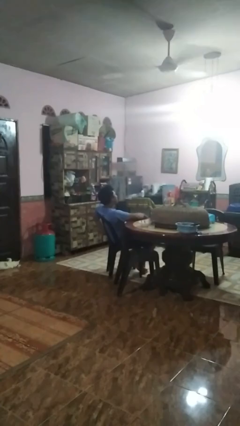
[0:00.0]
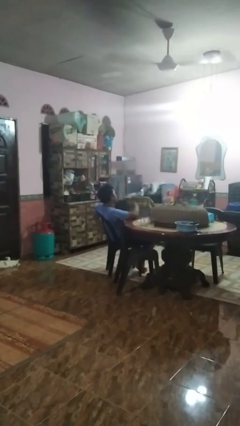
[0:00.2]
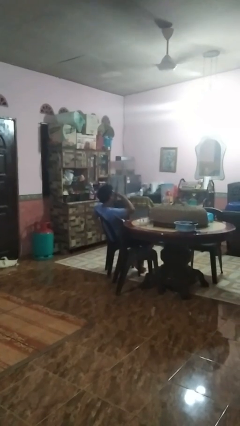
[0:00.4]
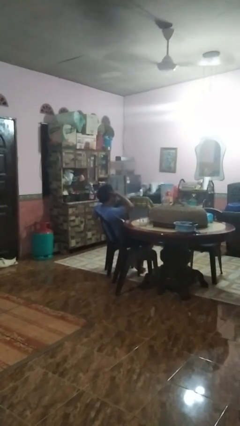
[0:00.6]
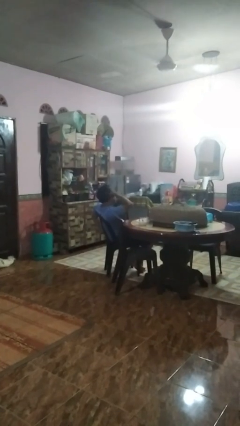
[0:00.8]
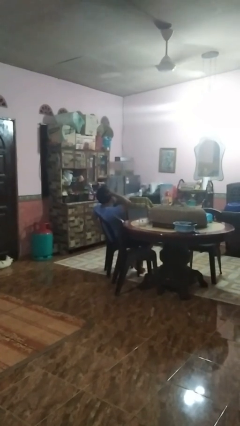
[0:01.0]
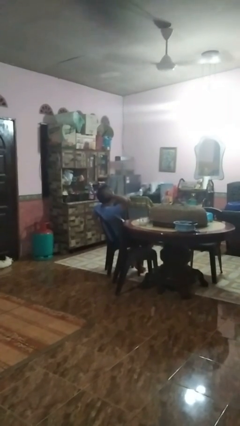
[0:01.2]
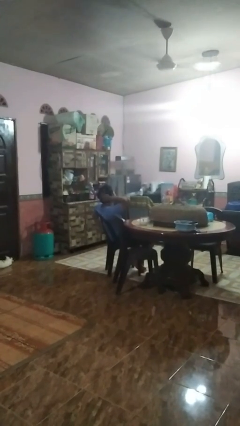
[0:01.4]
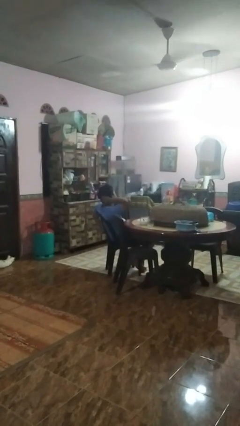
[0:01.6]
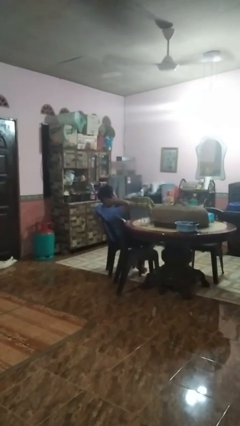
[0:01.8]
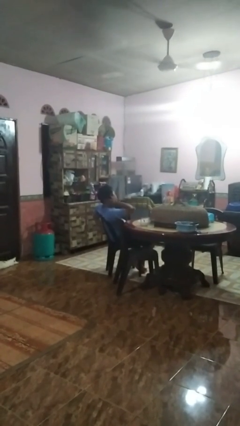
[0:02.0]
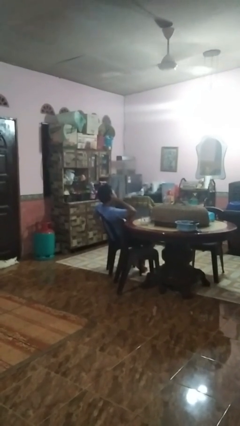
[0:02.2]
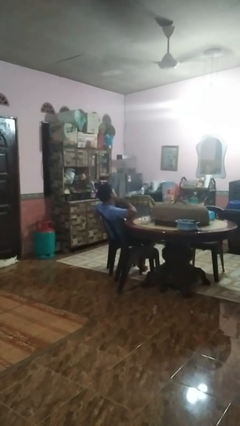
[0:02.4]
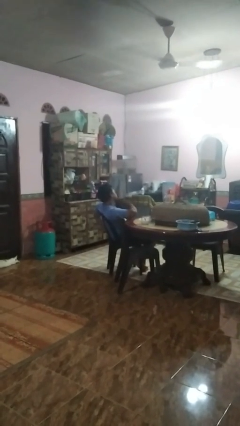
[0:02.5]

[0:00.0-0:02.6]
person strokes hair

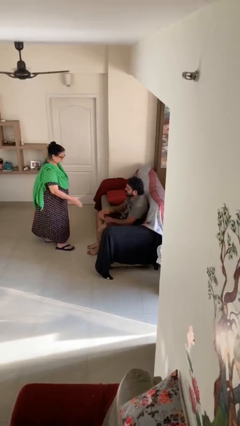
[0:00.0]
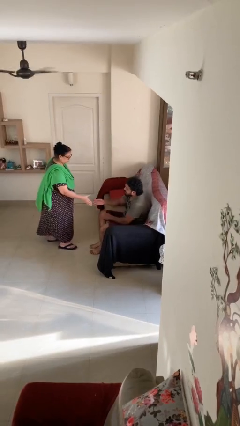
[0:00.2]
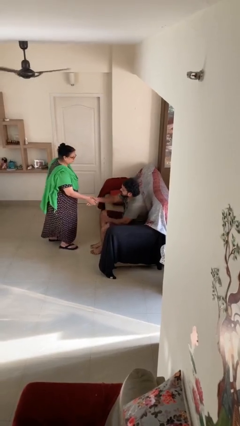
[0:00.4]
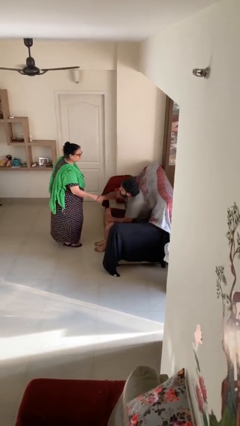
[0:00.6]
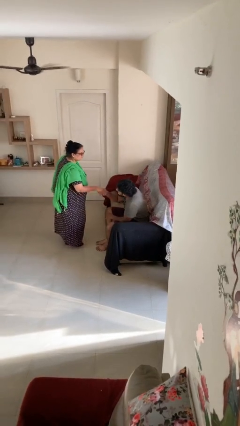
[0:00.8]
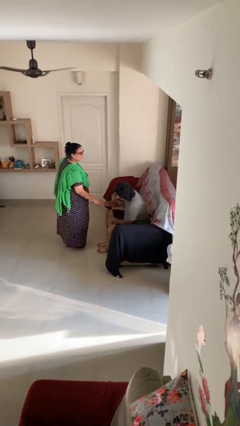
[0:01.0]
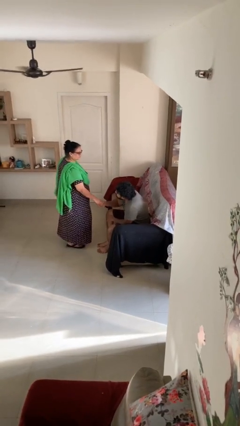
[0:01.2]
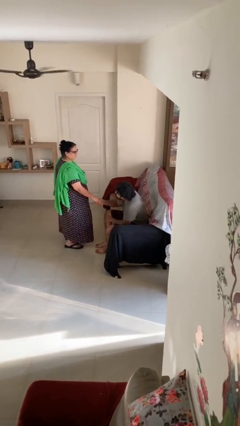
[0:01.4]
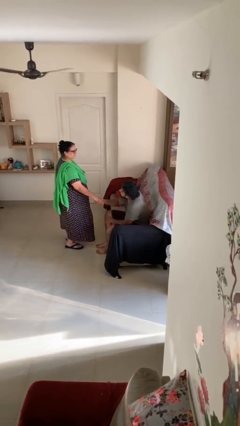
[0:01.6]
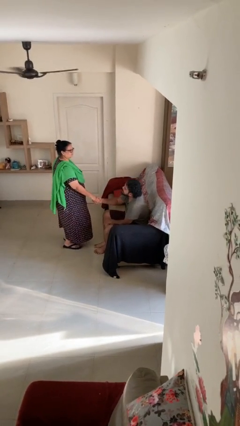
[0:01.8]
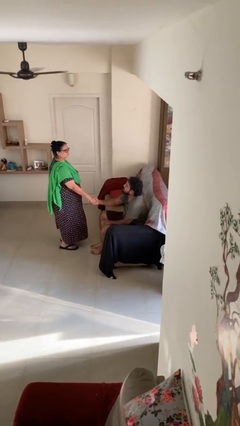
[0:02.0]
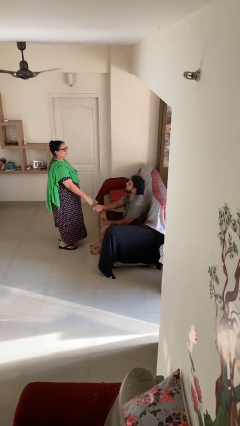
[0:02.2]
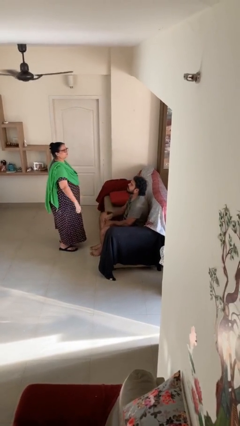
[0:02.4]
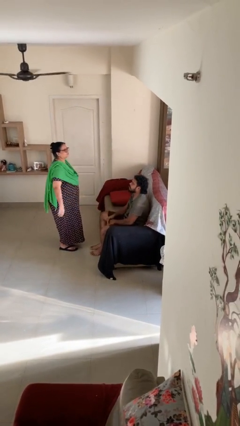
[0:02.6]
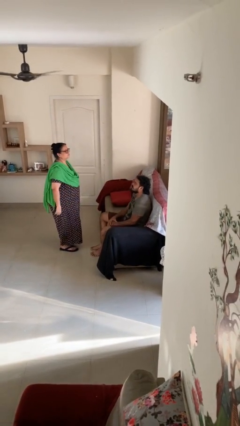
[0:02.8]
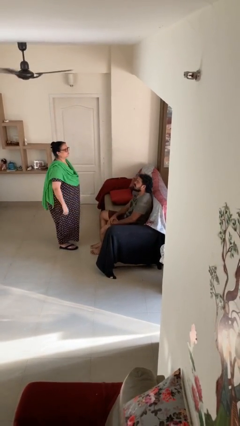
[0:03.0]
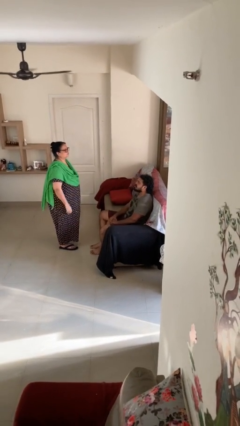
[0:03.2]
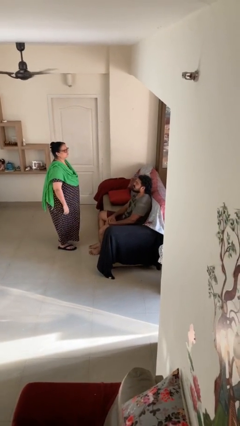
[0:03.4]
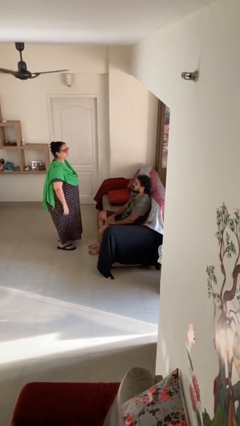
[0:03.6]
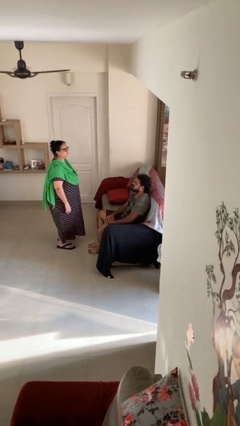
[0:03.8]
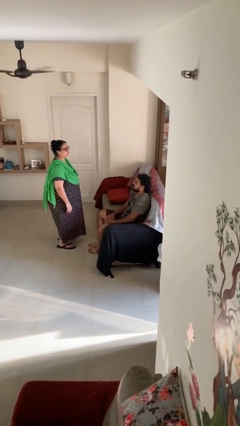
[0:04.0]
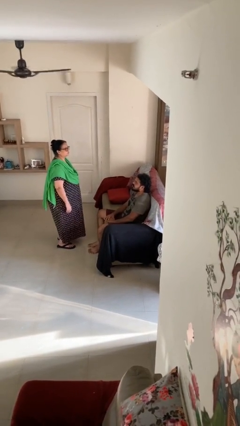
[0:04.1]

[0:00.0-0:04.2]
person shakes hand

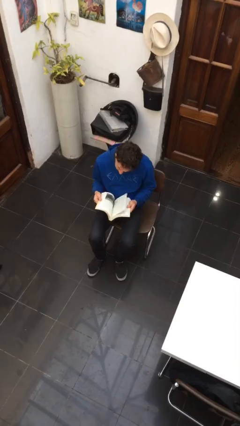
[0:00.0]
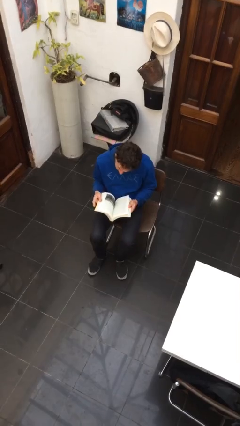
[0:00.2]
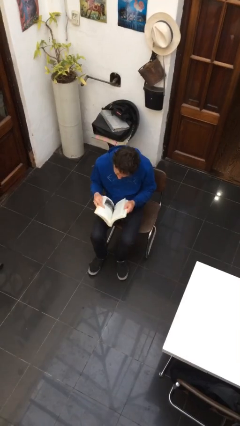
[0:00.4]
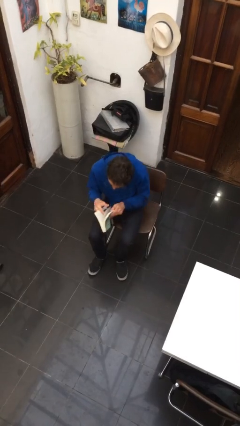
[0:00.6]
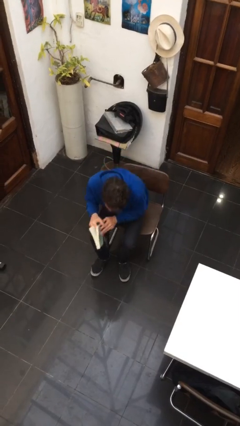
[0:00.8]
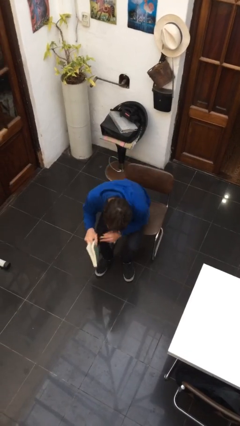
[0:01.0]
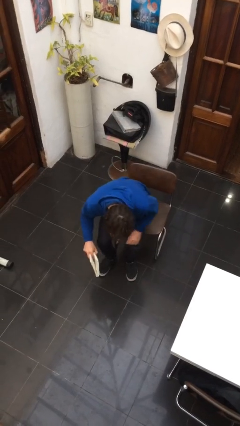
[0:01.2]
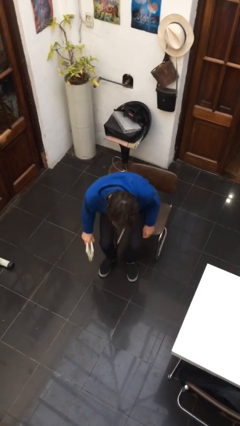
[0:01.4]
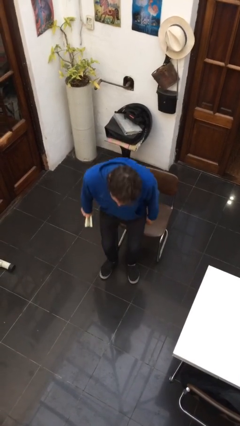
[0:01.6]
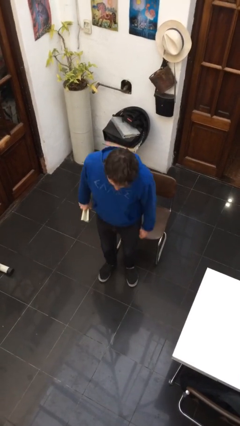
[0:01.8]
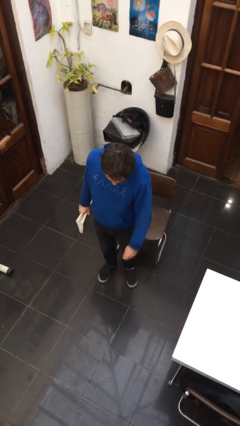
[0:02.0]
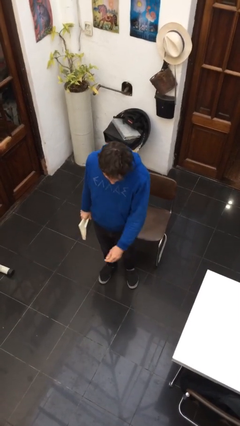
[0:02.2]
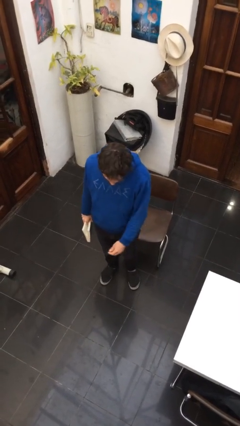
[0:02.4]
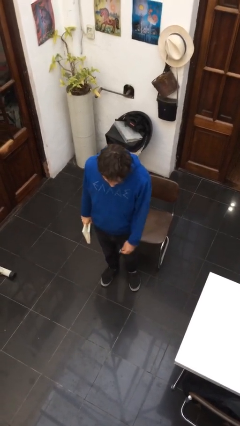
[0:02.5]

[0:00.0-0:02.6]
person stands up

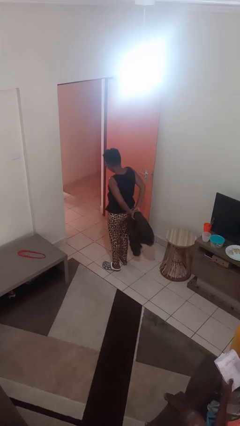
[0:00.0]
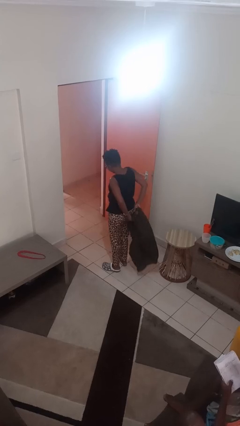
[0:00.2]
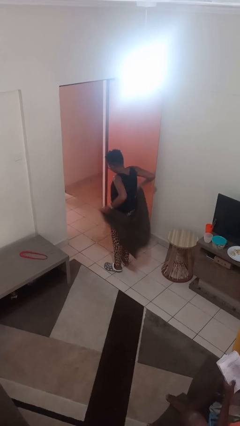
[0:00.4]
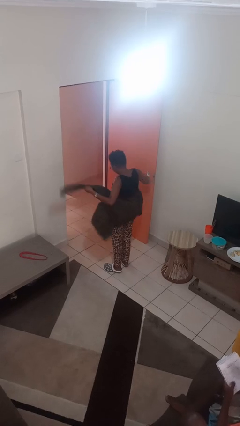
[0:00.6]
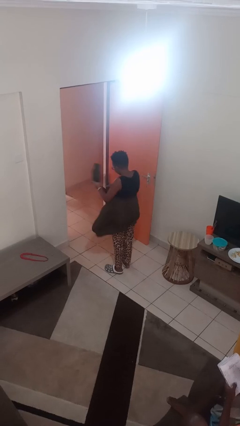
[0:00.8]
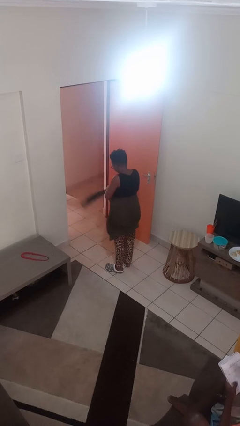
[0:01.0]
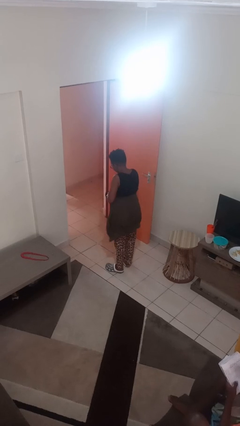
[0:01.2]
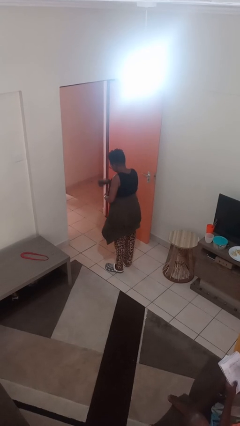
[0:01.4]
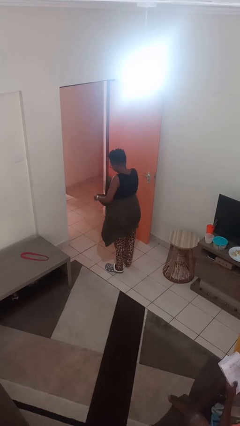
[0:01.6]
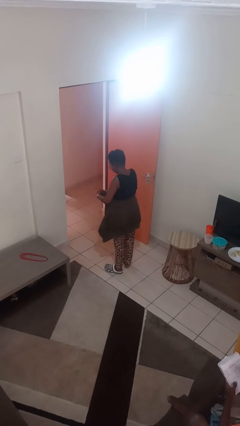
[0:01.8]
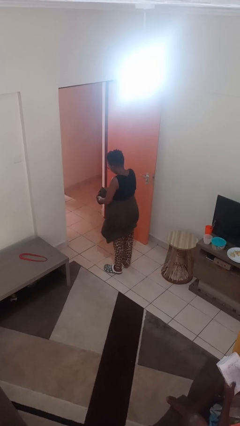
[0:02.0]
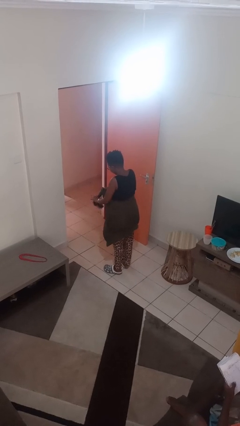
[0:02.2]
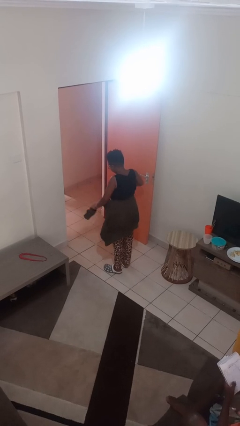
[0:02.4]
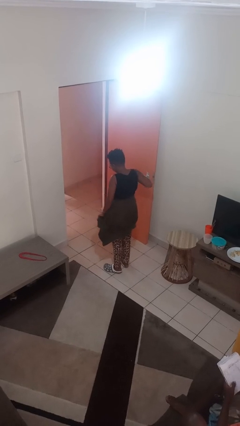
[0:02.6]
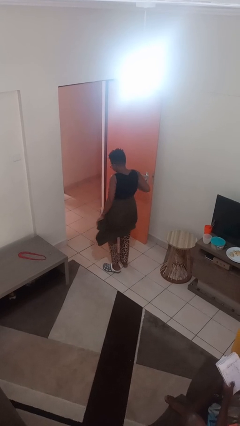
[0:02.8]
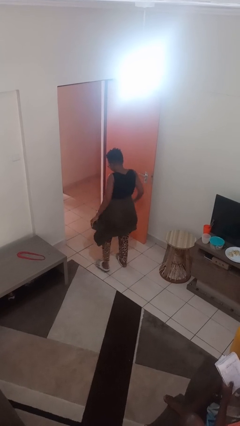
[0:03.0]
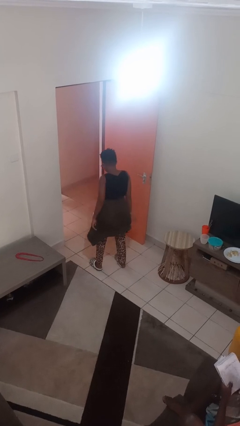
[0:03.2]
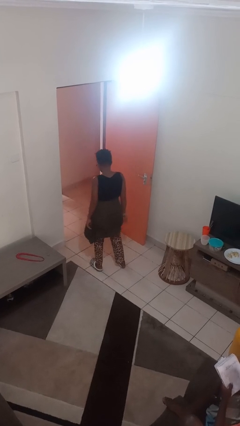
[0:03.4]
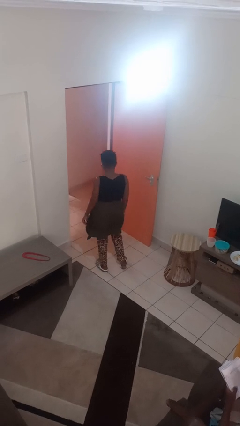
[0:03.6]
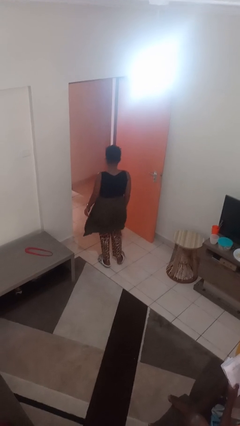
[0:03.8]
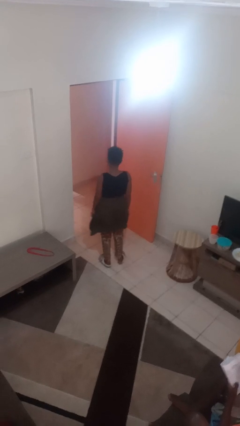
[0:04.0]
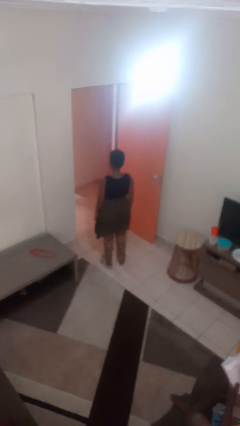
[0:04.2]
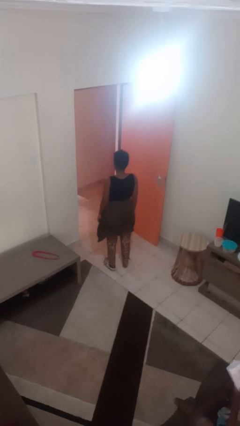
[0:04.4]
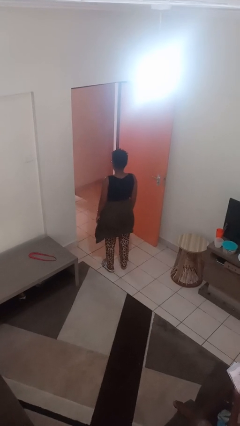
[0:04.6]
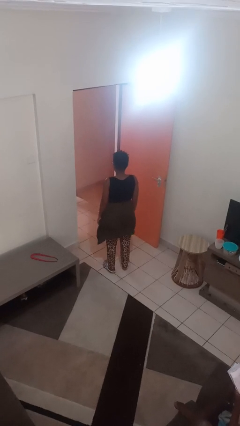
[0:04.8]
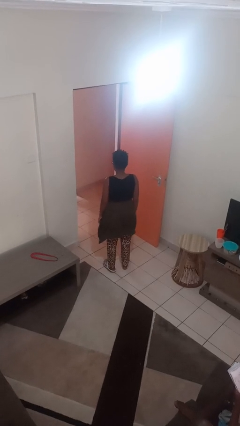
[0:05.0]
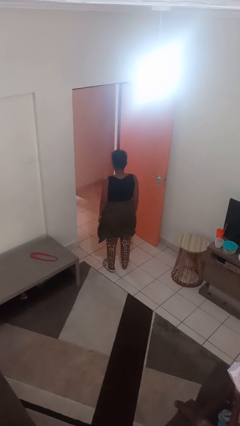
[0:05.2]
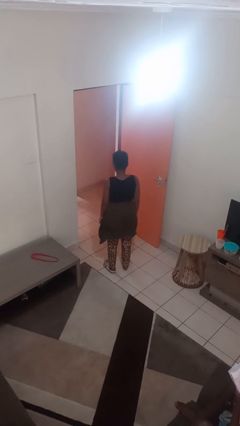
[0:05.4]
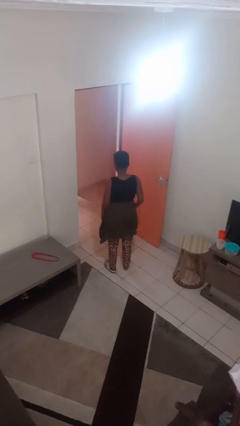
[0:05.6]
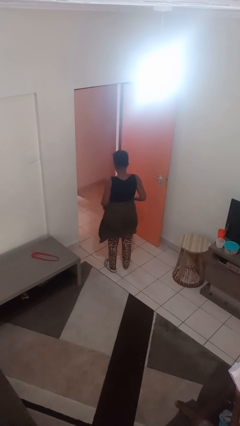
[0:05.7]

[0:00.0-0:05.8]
person ties jacket around waist

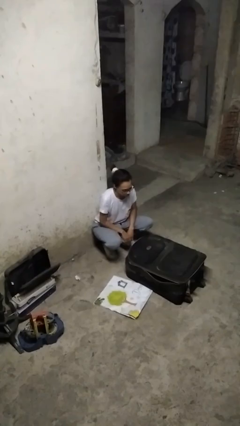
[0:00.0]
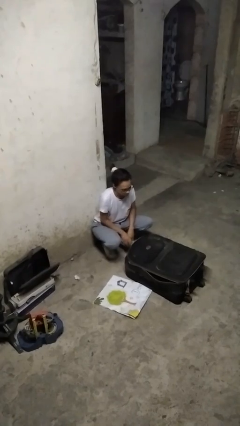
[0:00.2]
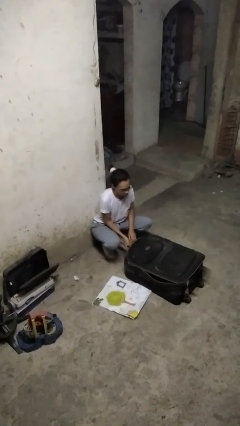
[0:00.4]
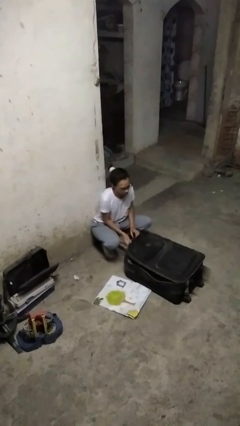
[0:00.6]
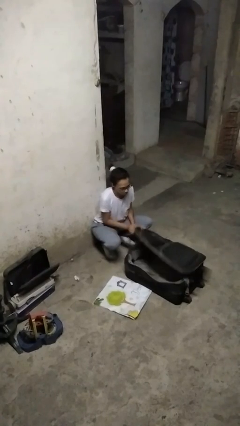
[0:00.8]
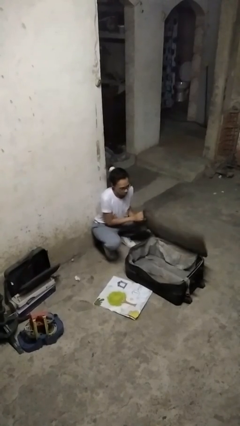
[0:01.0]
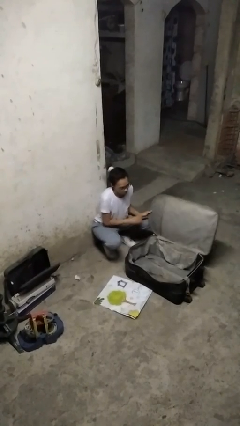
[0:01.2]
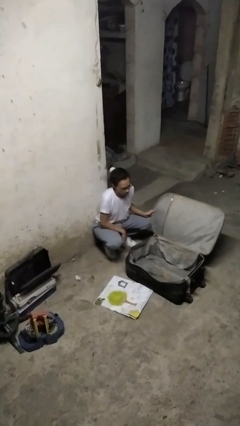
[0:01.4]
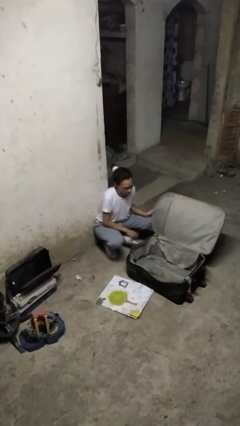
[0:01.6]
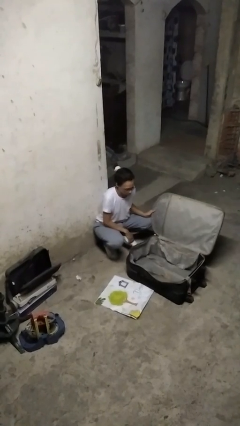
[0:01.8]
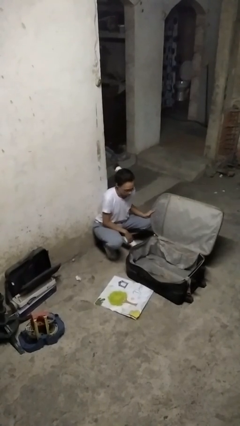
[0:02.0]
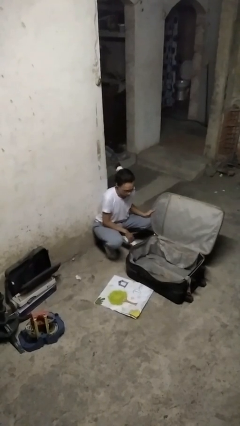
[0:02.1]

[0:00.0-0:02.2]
person opens suitcase

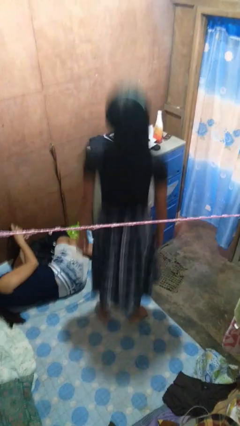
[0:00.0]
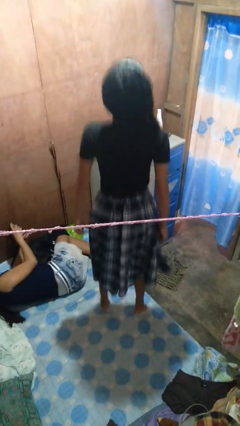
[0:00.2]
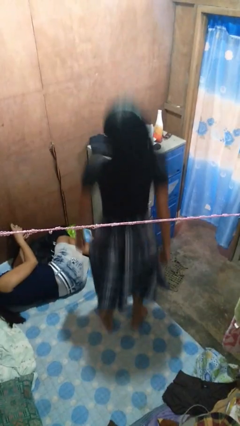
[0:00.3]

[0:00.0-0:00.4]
person jumps on bed
